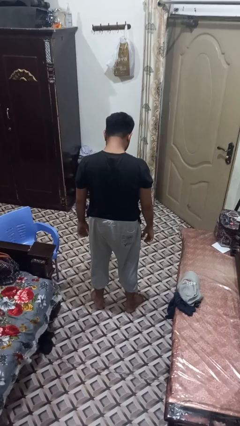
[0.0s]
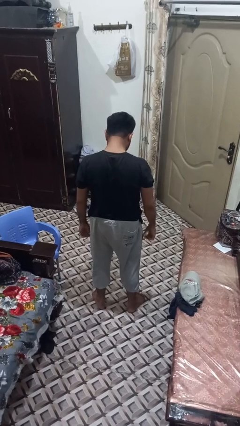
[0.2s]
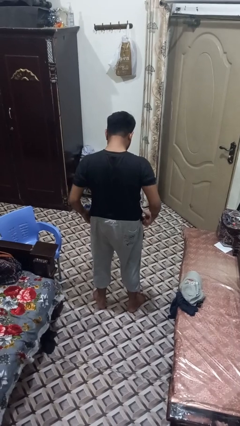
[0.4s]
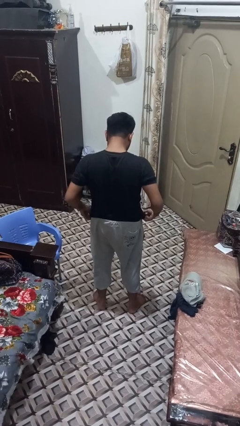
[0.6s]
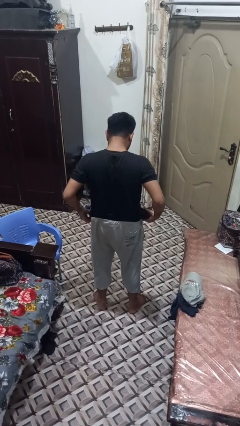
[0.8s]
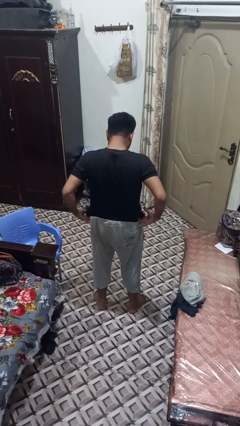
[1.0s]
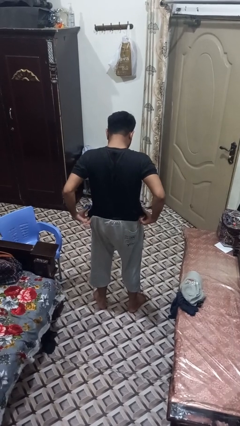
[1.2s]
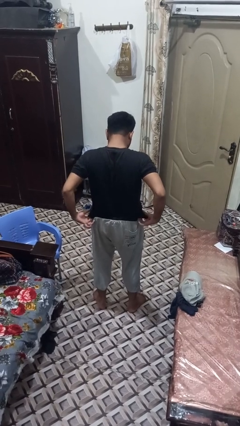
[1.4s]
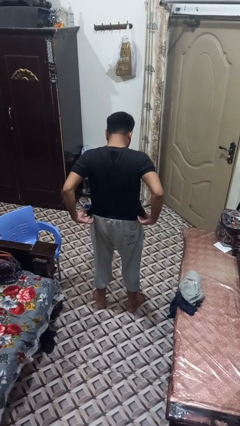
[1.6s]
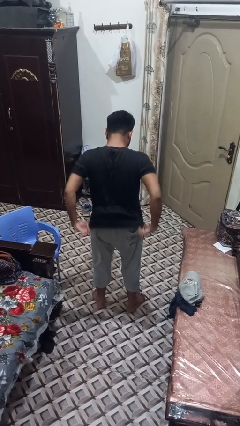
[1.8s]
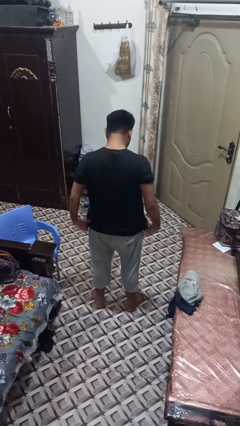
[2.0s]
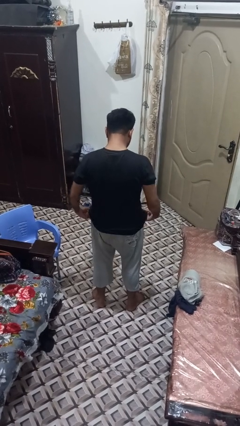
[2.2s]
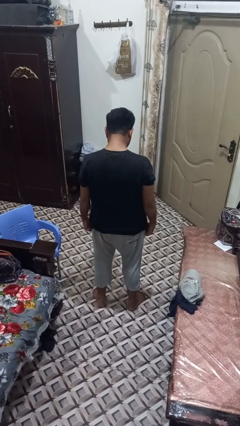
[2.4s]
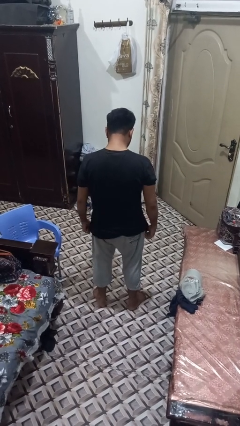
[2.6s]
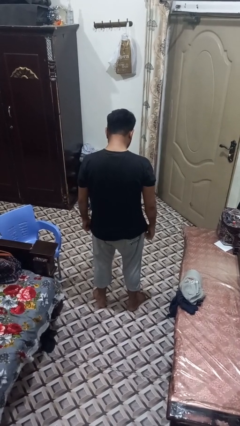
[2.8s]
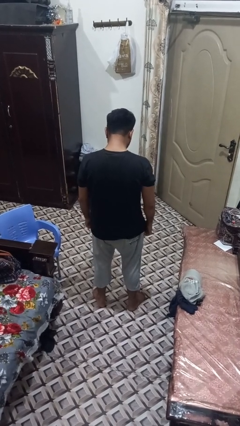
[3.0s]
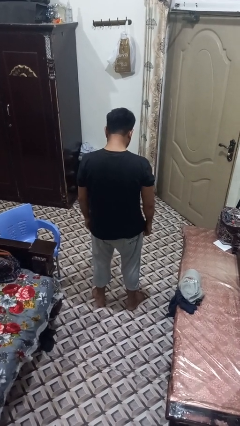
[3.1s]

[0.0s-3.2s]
person untucks shirt

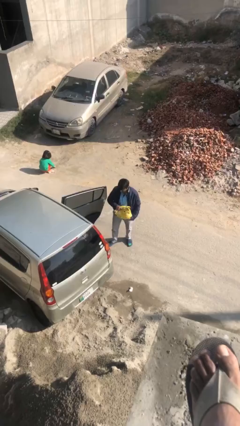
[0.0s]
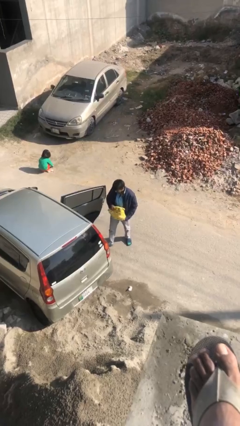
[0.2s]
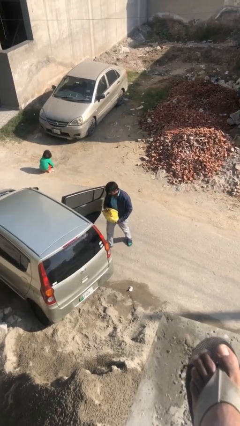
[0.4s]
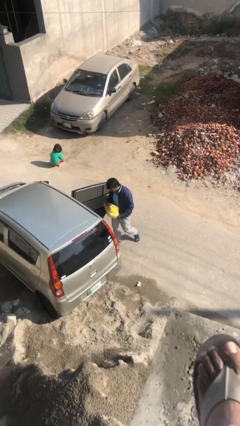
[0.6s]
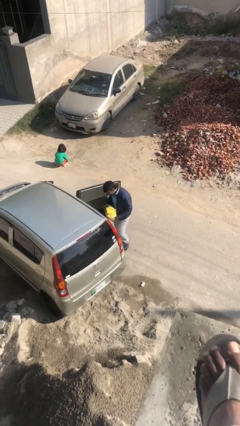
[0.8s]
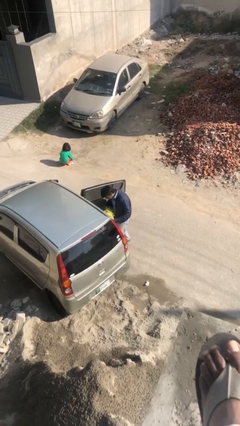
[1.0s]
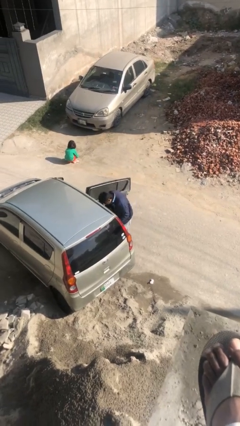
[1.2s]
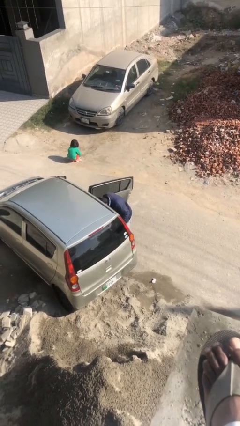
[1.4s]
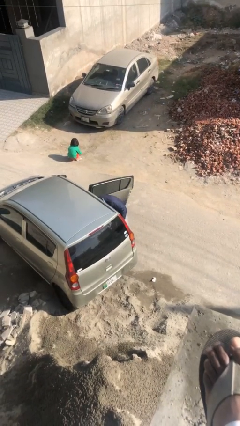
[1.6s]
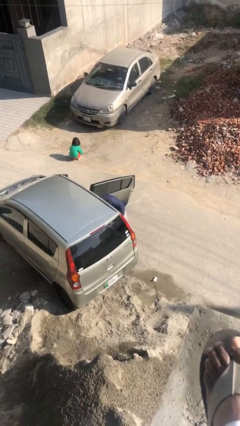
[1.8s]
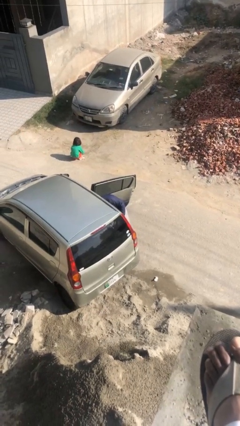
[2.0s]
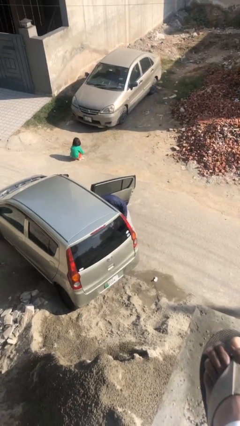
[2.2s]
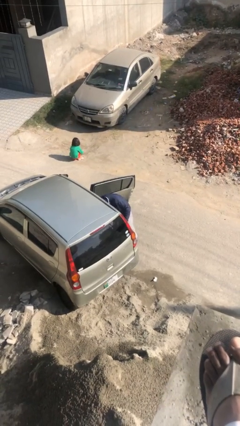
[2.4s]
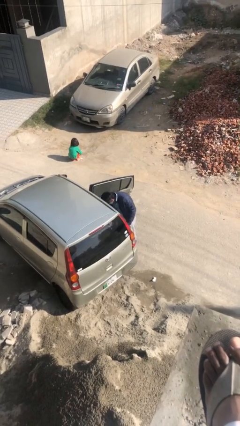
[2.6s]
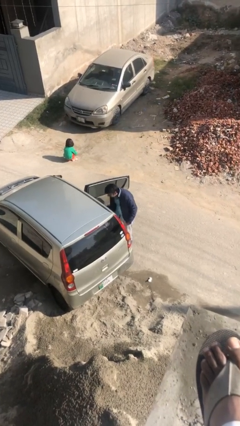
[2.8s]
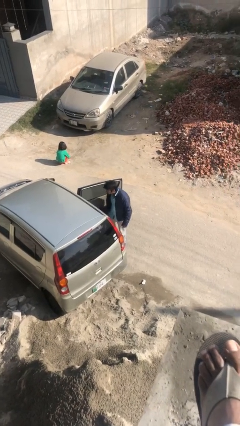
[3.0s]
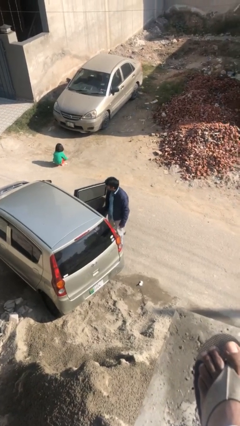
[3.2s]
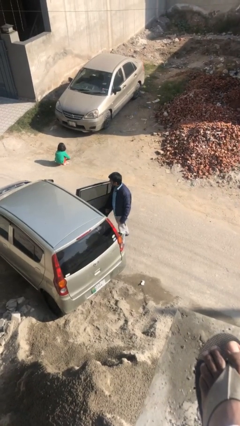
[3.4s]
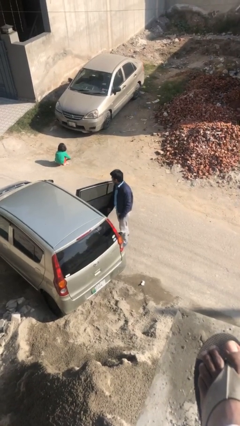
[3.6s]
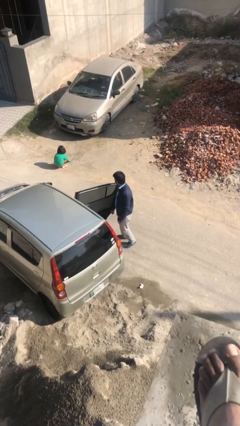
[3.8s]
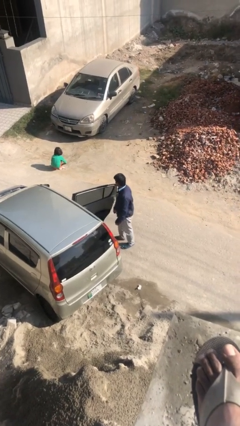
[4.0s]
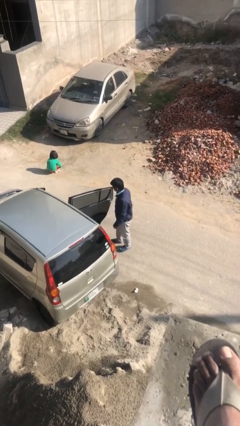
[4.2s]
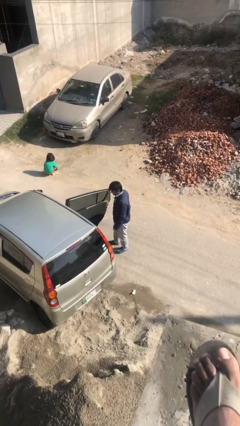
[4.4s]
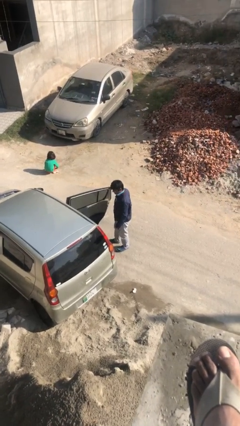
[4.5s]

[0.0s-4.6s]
person loads car

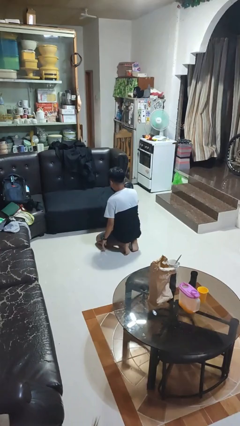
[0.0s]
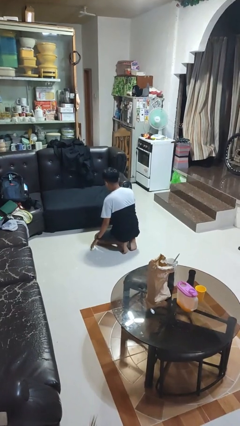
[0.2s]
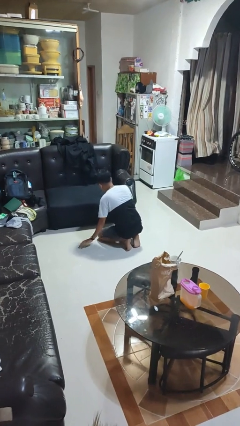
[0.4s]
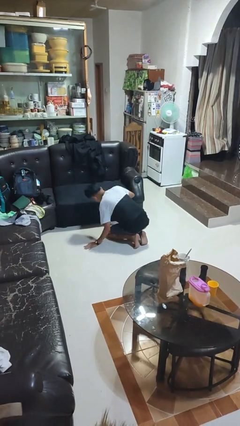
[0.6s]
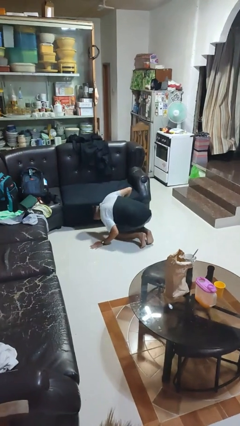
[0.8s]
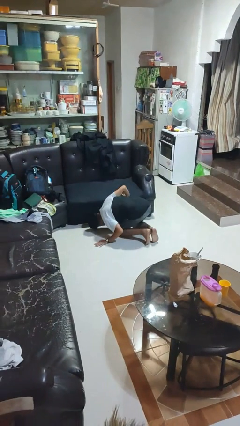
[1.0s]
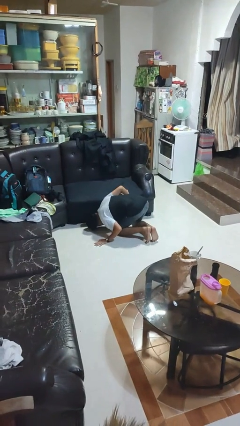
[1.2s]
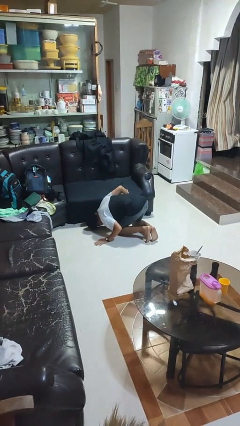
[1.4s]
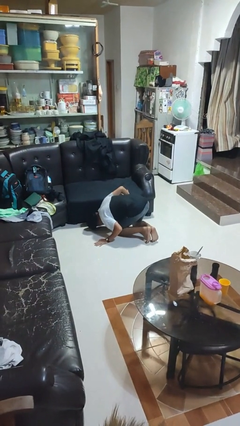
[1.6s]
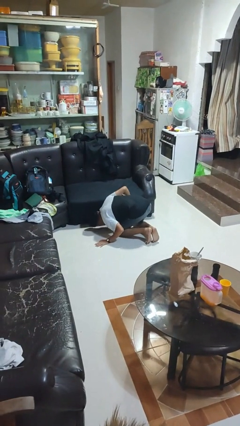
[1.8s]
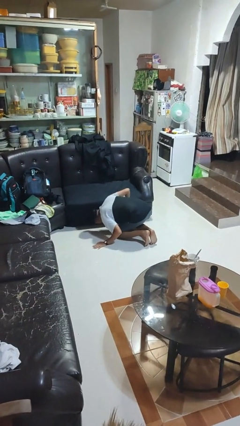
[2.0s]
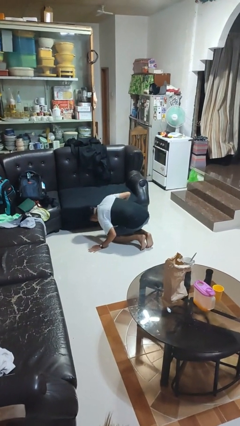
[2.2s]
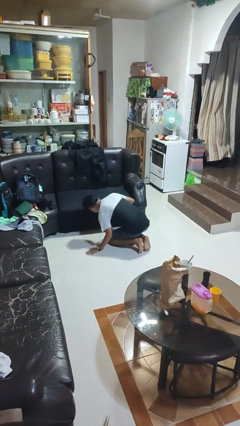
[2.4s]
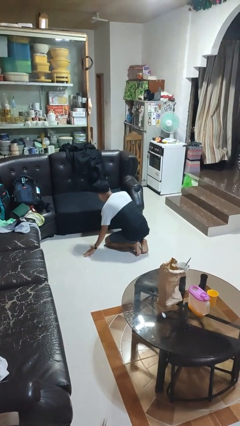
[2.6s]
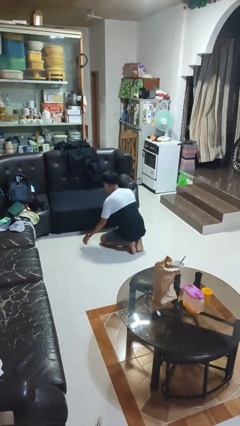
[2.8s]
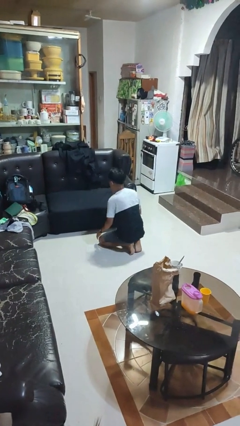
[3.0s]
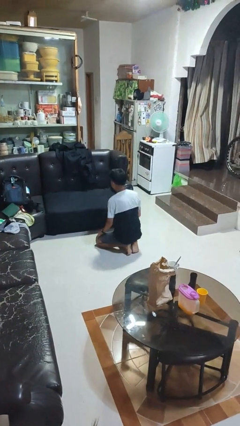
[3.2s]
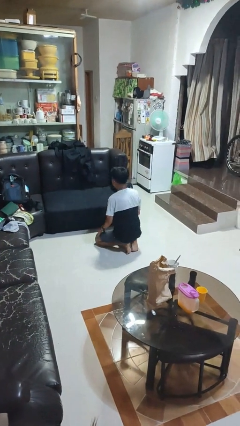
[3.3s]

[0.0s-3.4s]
person searches under couch

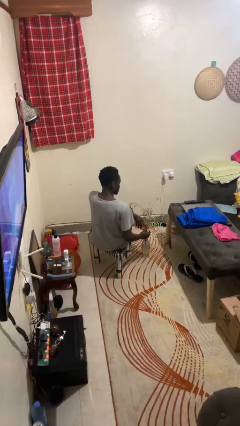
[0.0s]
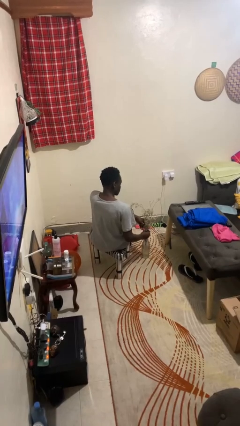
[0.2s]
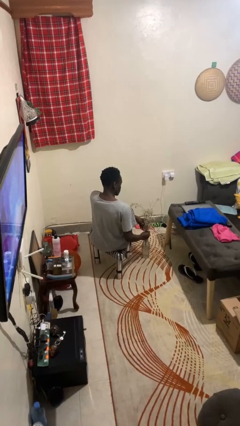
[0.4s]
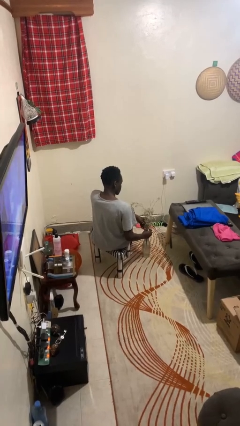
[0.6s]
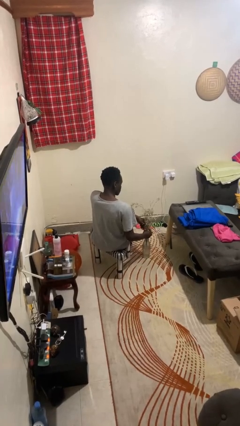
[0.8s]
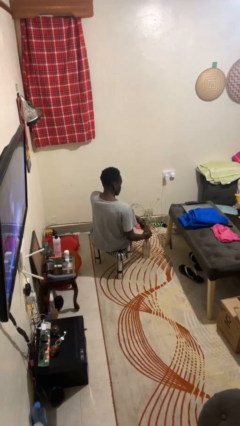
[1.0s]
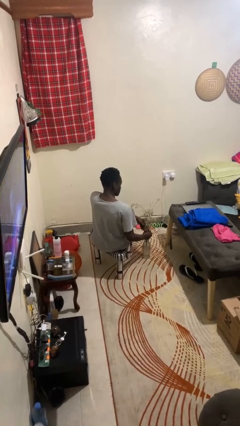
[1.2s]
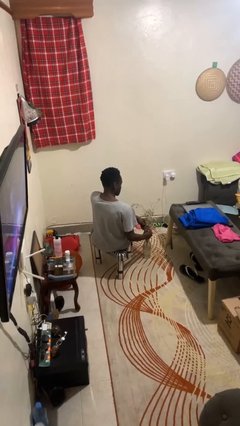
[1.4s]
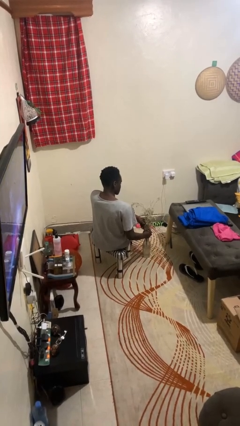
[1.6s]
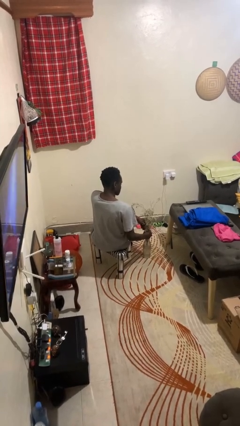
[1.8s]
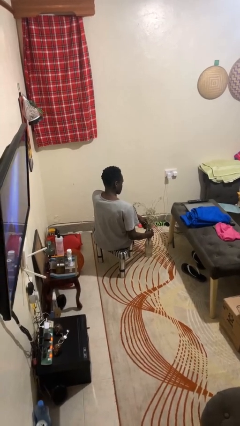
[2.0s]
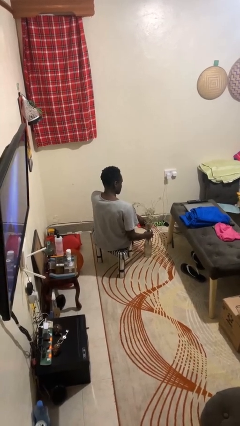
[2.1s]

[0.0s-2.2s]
person arranges flowers in vase

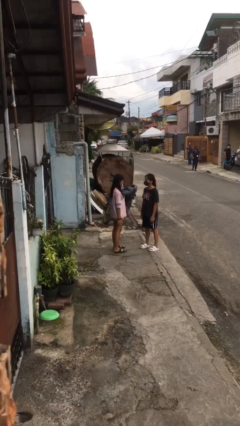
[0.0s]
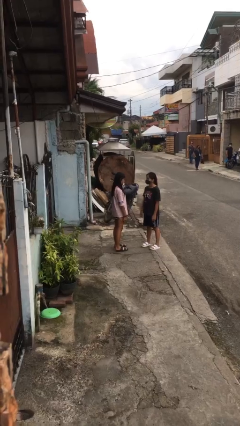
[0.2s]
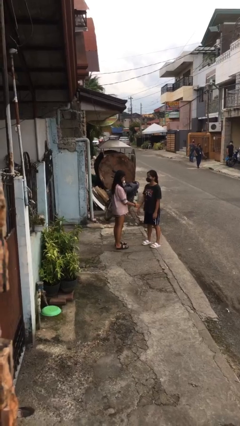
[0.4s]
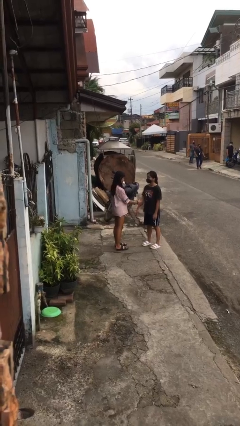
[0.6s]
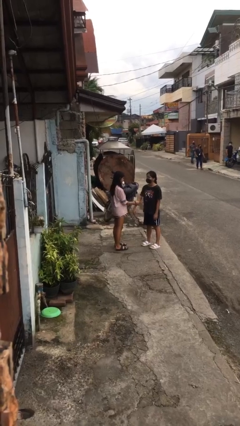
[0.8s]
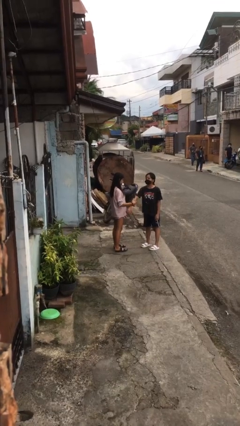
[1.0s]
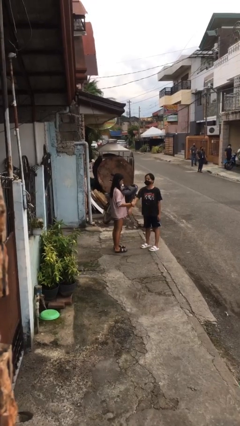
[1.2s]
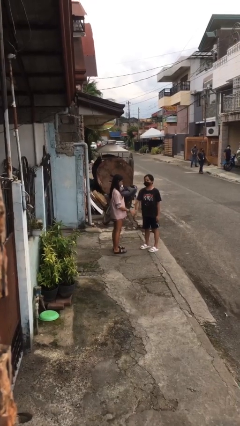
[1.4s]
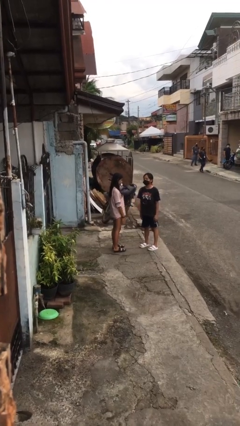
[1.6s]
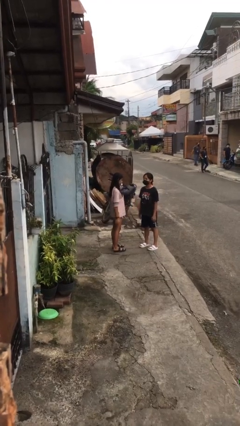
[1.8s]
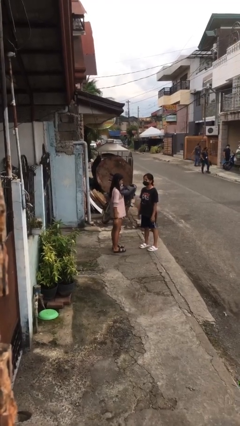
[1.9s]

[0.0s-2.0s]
person grabs person by forearm

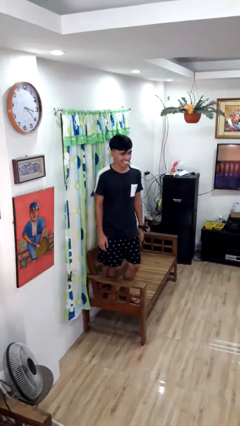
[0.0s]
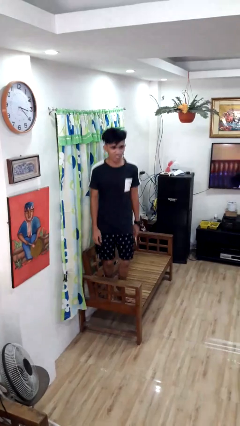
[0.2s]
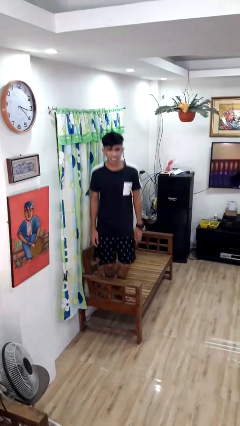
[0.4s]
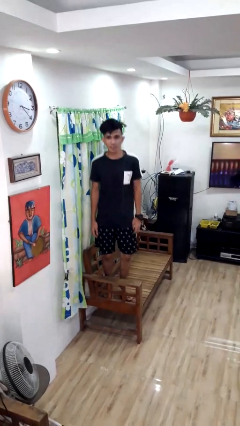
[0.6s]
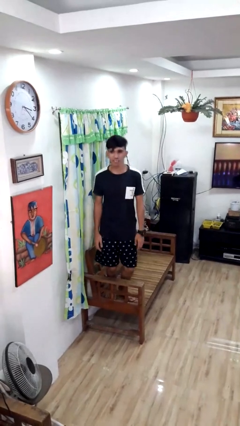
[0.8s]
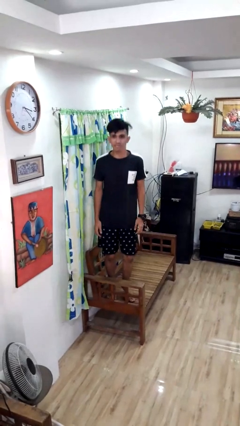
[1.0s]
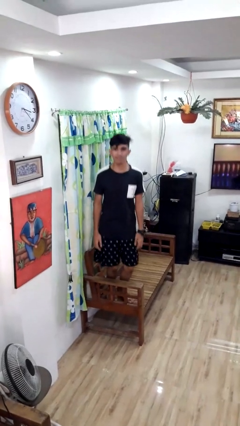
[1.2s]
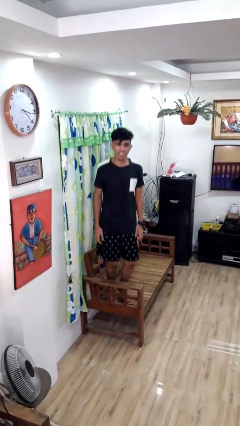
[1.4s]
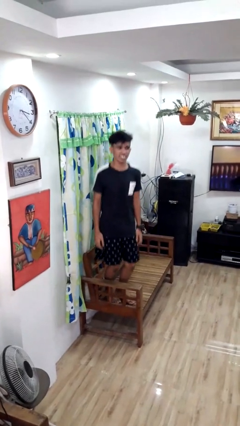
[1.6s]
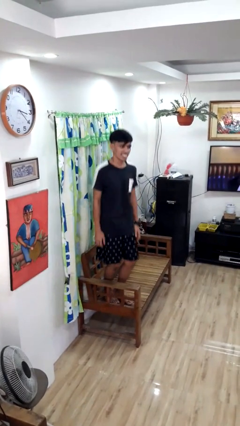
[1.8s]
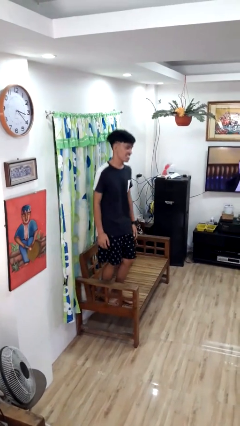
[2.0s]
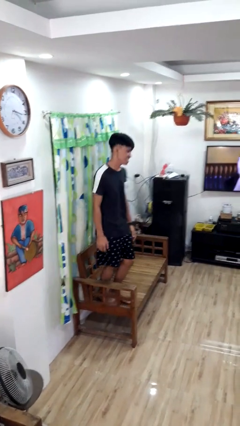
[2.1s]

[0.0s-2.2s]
person jumps on couch
